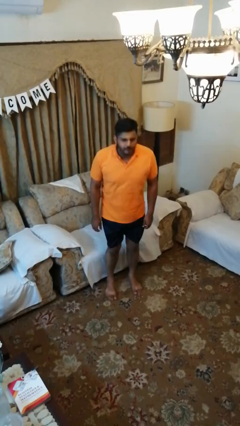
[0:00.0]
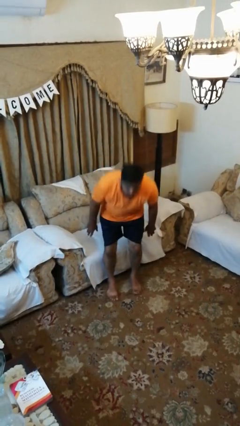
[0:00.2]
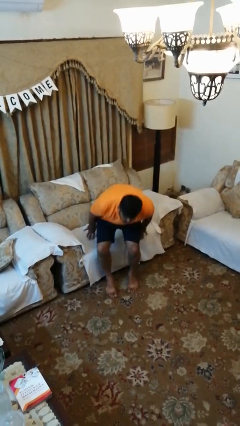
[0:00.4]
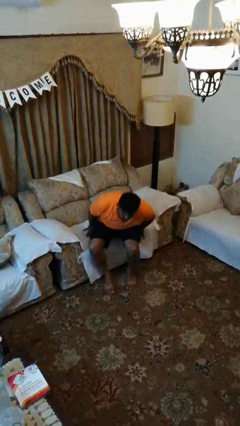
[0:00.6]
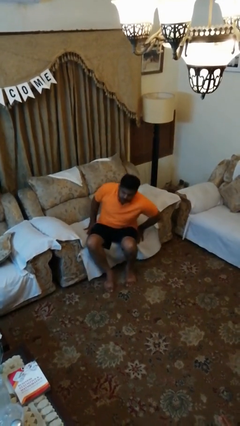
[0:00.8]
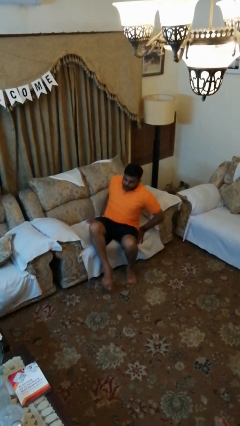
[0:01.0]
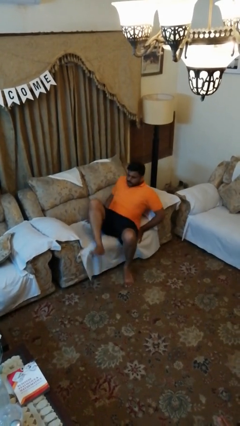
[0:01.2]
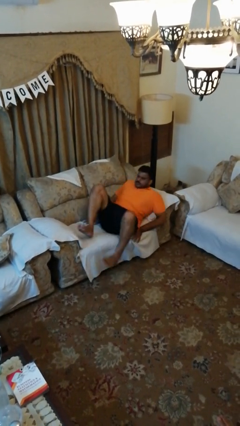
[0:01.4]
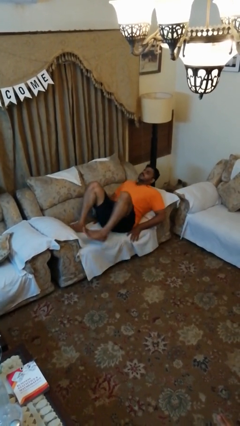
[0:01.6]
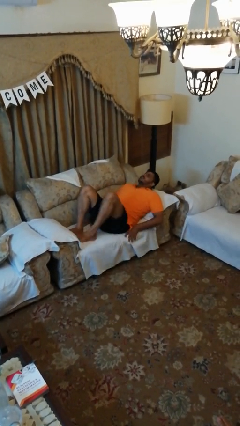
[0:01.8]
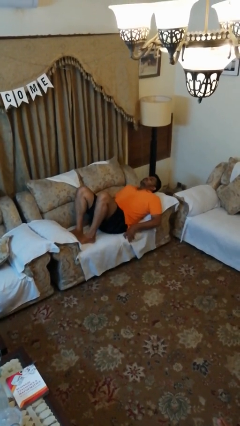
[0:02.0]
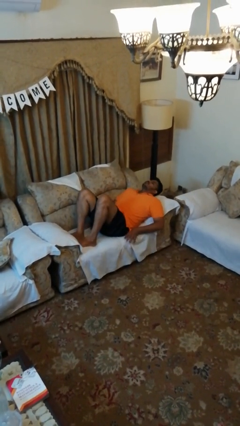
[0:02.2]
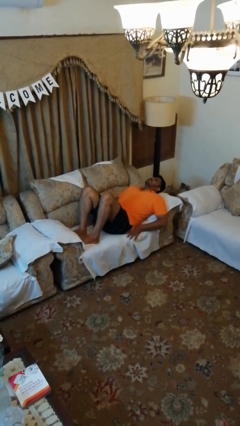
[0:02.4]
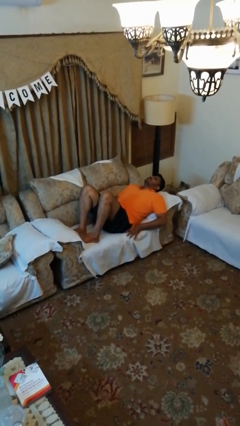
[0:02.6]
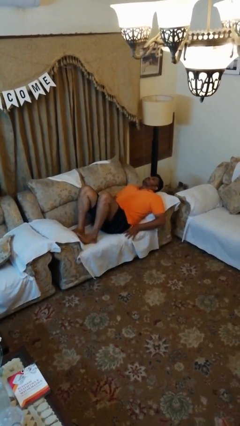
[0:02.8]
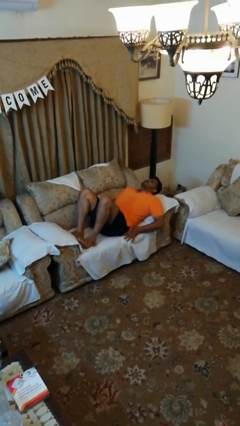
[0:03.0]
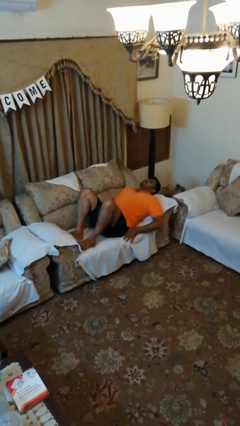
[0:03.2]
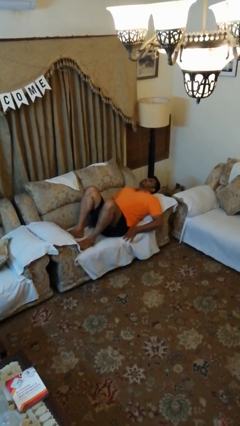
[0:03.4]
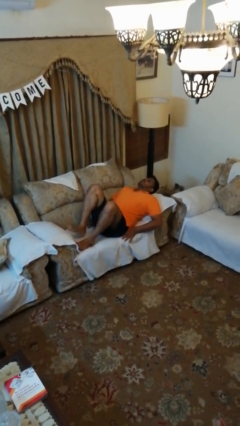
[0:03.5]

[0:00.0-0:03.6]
person lies down on couch

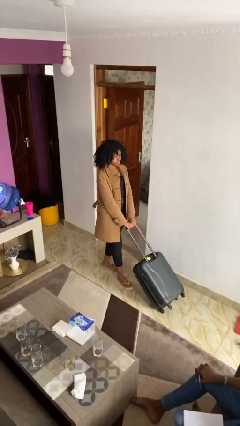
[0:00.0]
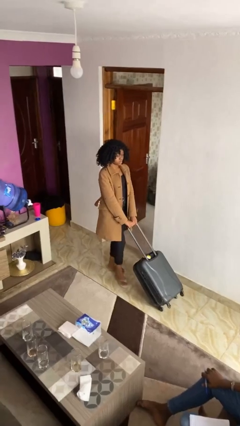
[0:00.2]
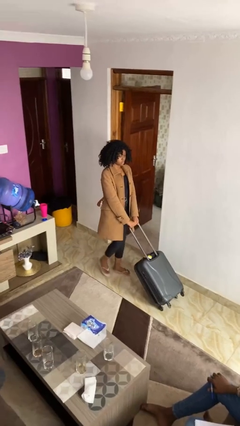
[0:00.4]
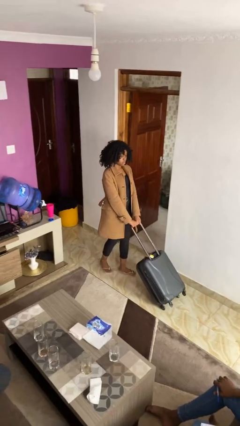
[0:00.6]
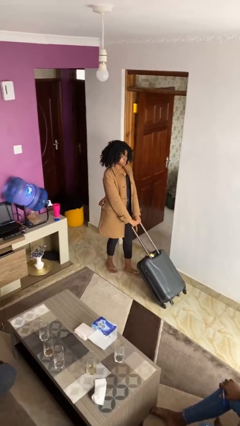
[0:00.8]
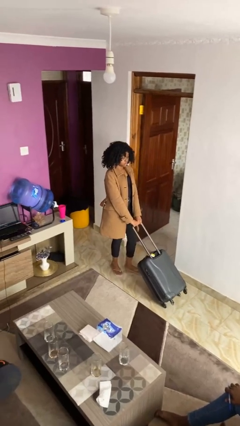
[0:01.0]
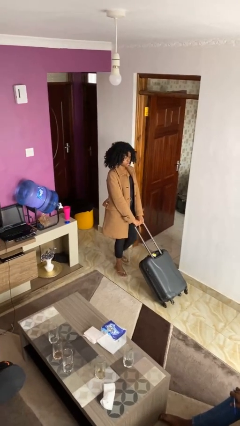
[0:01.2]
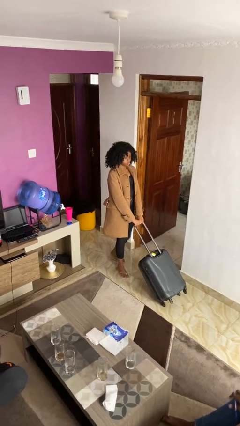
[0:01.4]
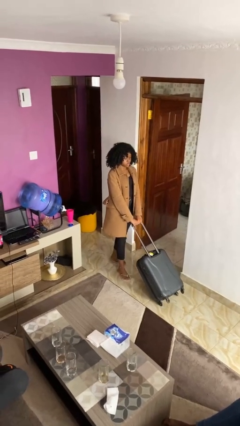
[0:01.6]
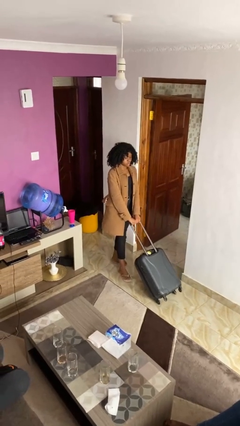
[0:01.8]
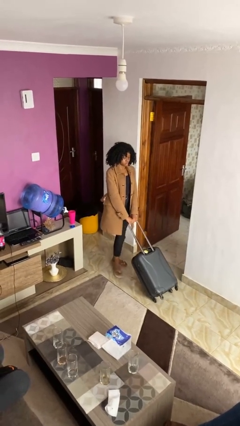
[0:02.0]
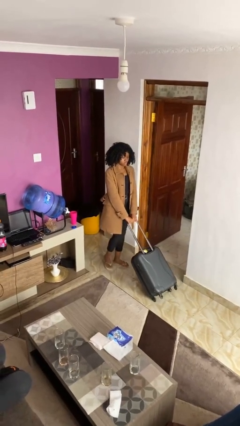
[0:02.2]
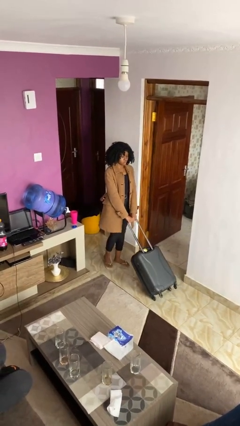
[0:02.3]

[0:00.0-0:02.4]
person pulls wheeled cart

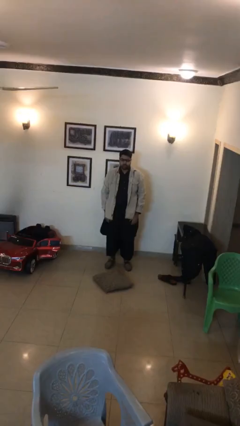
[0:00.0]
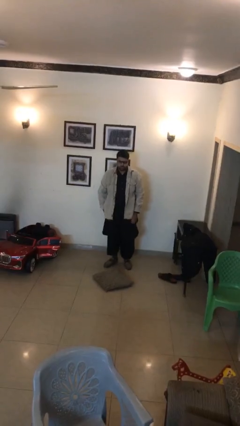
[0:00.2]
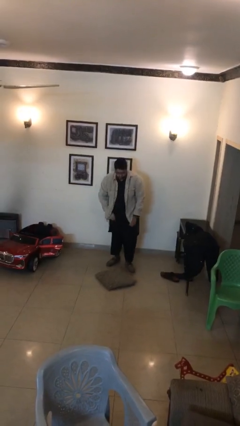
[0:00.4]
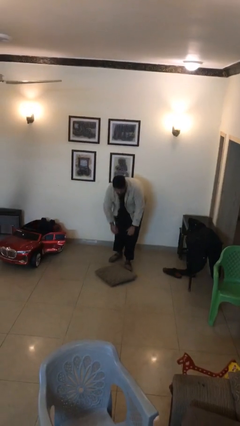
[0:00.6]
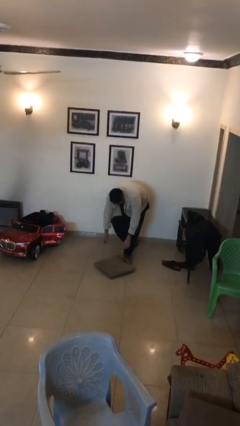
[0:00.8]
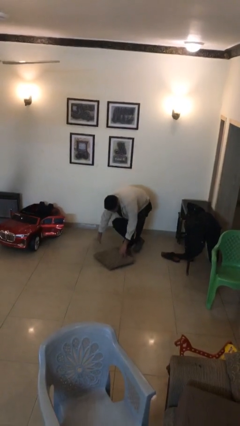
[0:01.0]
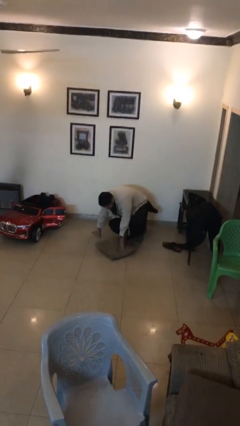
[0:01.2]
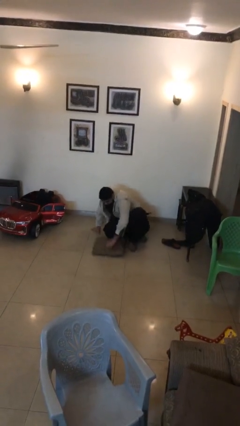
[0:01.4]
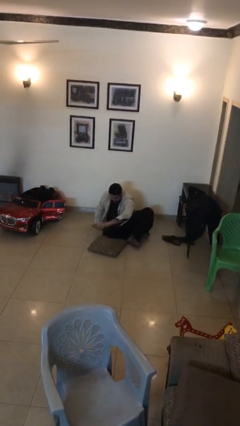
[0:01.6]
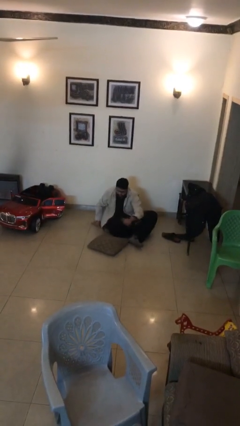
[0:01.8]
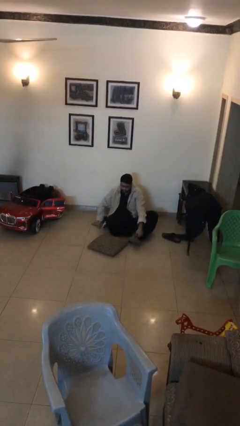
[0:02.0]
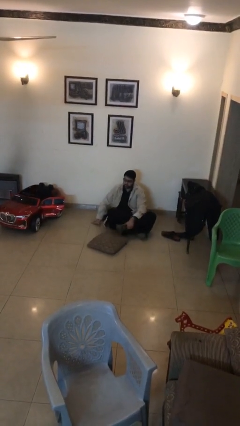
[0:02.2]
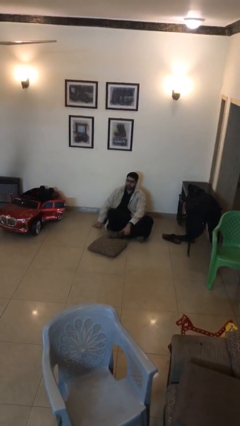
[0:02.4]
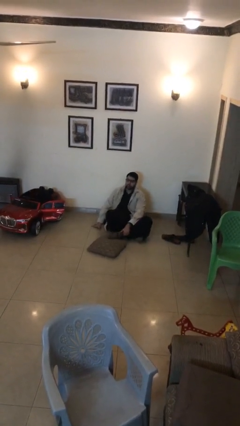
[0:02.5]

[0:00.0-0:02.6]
person sits down

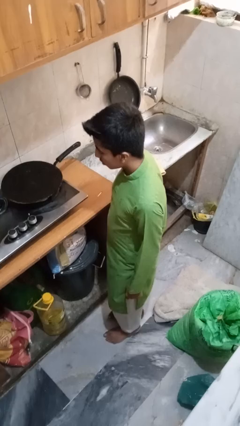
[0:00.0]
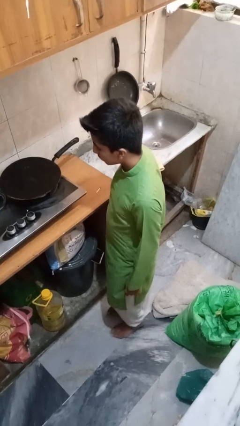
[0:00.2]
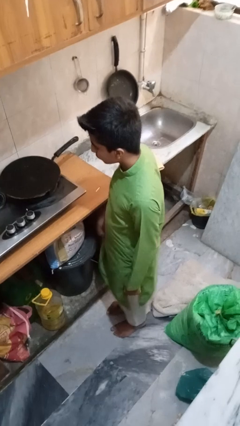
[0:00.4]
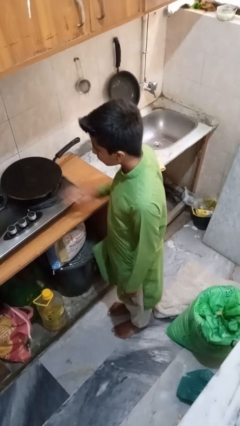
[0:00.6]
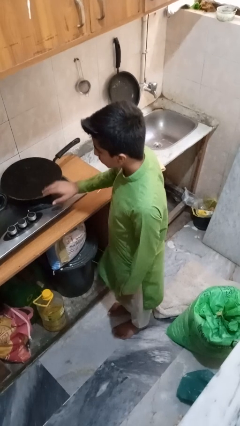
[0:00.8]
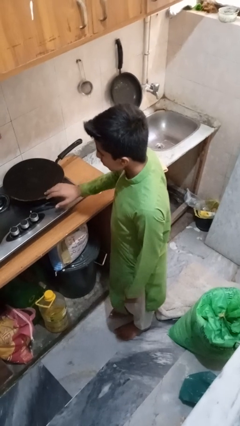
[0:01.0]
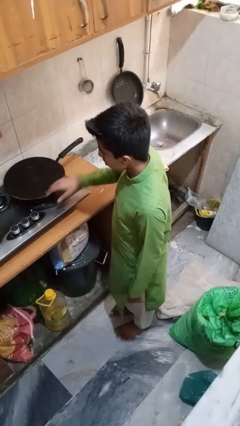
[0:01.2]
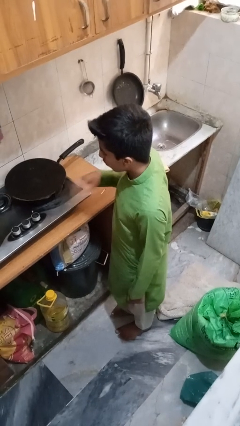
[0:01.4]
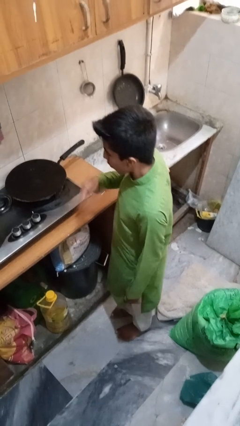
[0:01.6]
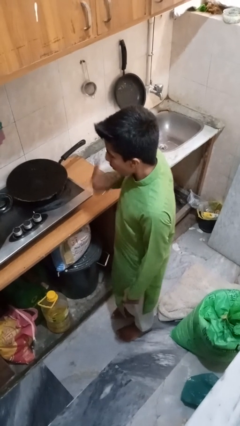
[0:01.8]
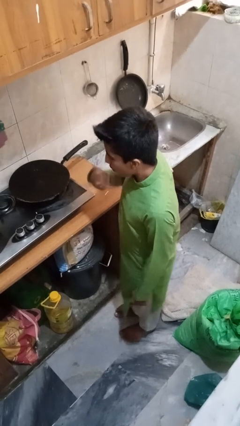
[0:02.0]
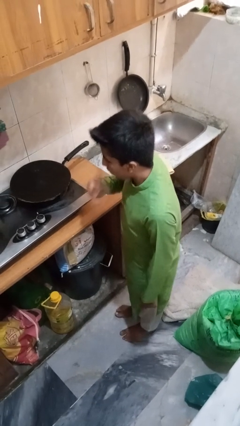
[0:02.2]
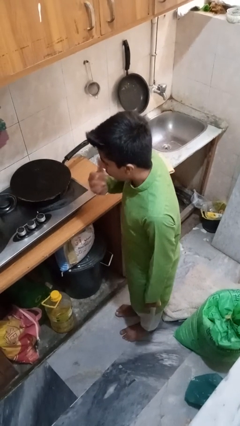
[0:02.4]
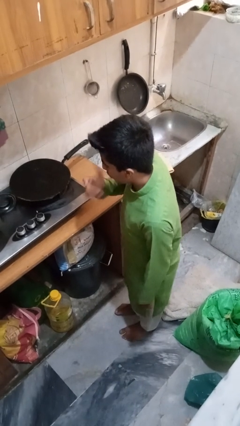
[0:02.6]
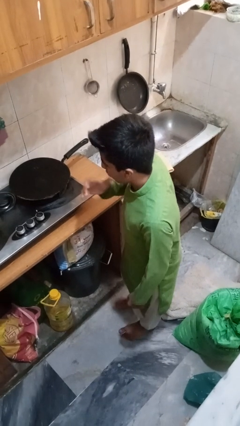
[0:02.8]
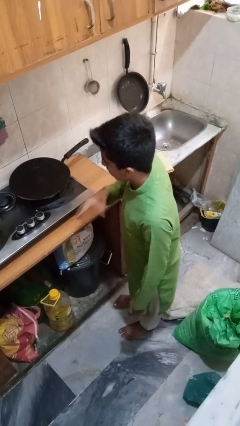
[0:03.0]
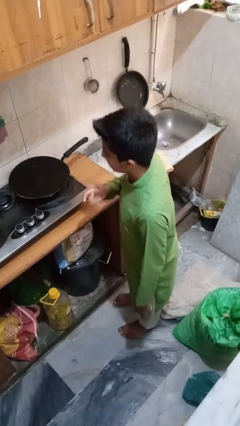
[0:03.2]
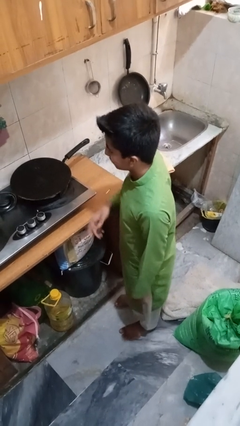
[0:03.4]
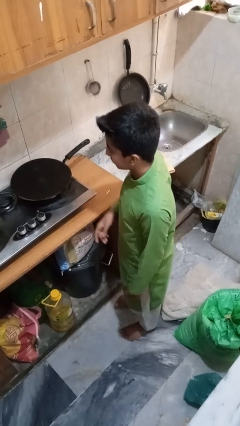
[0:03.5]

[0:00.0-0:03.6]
person burns hand

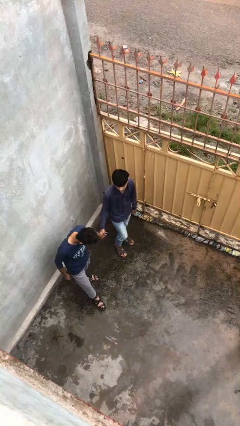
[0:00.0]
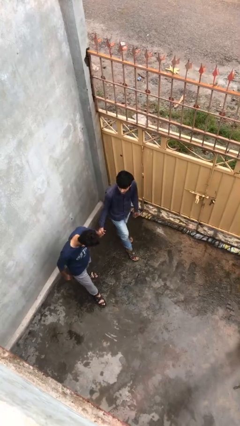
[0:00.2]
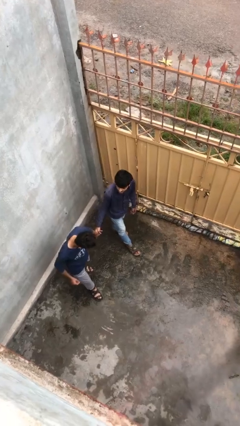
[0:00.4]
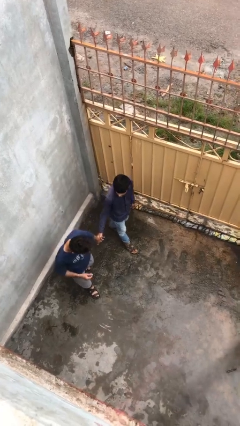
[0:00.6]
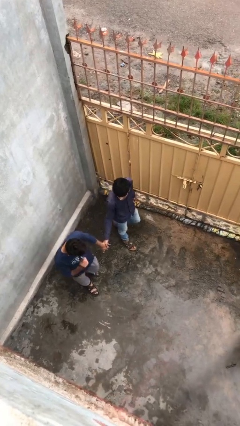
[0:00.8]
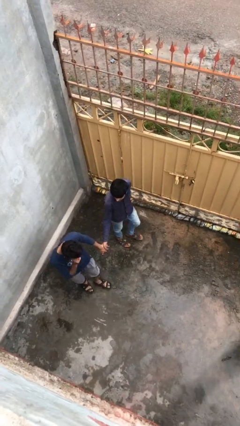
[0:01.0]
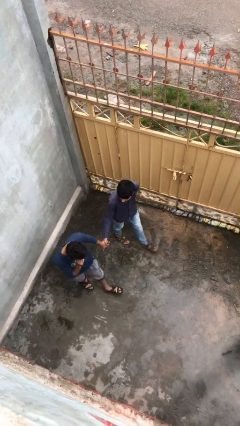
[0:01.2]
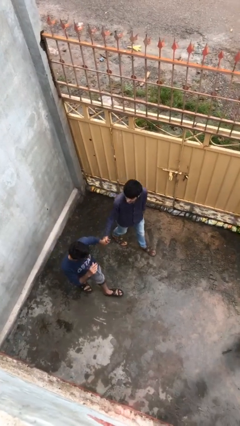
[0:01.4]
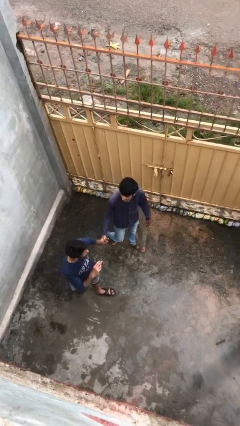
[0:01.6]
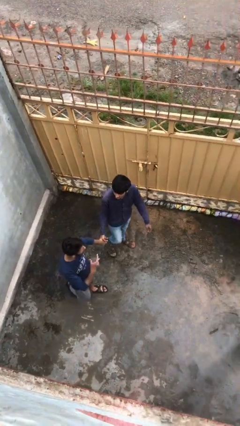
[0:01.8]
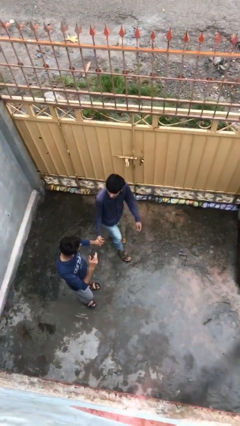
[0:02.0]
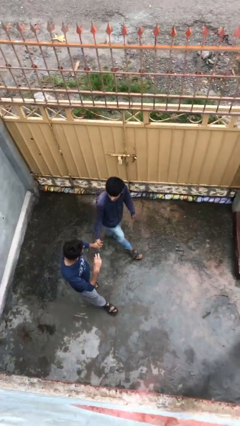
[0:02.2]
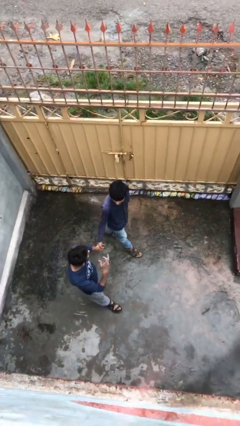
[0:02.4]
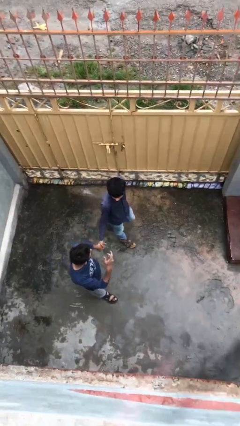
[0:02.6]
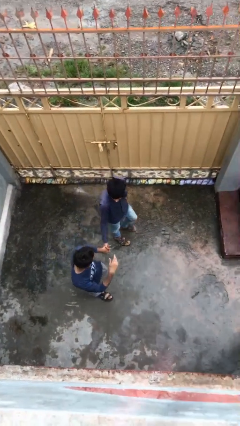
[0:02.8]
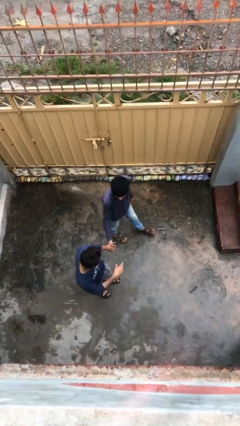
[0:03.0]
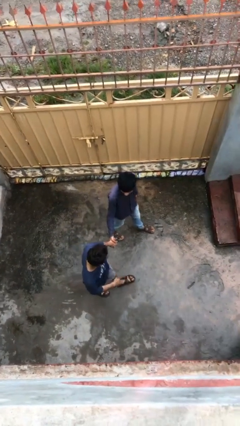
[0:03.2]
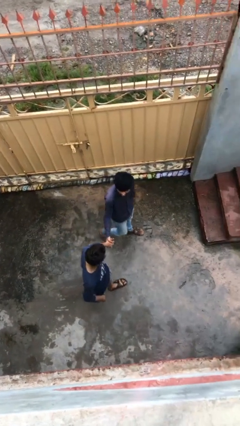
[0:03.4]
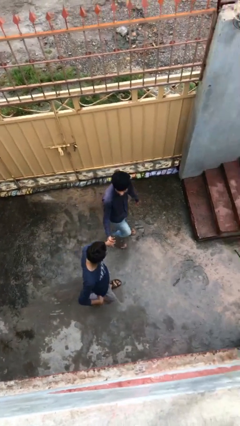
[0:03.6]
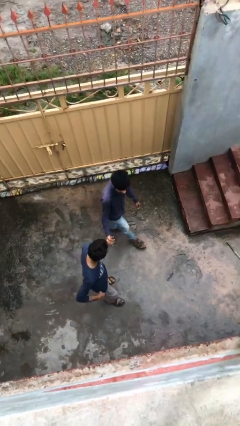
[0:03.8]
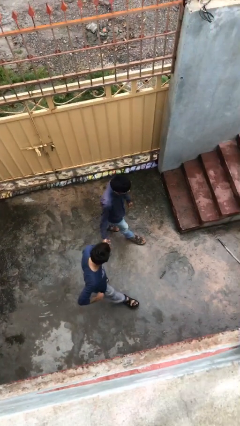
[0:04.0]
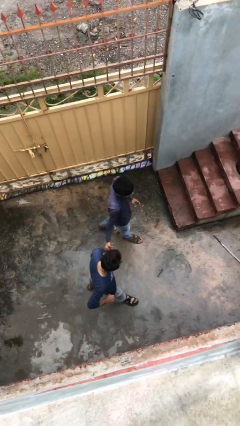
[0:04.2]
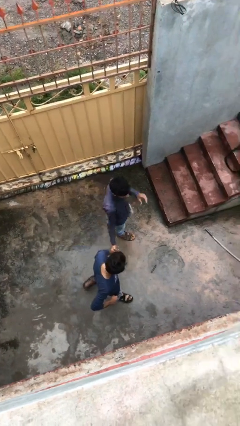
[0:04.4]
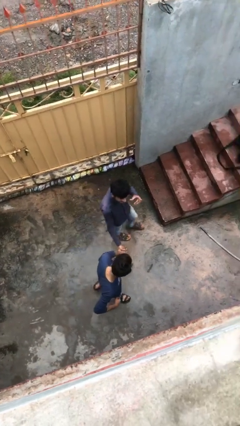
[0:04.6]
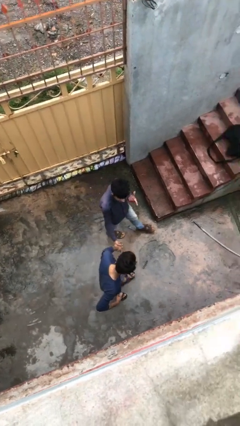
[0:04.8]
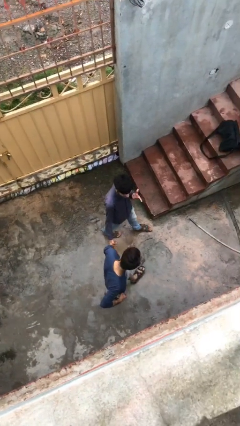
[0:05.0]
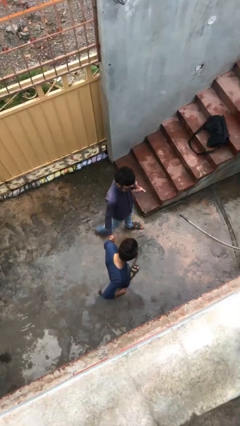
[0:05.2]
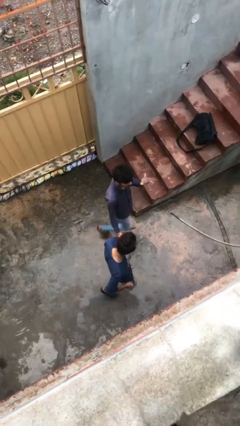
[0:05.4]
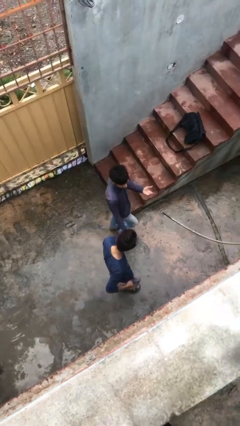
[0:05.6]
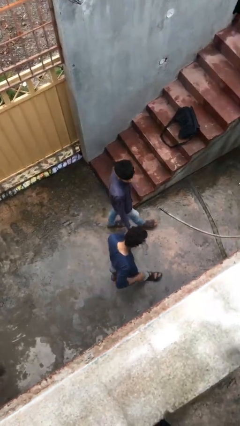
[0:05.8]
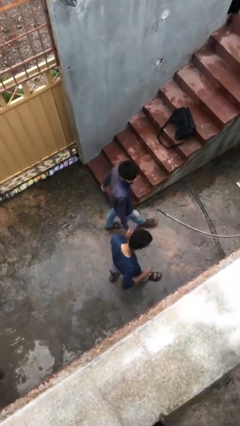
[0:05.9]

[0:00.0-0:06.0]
person holds hand
